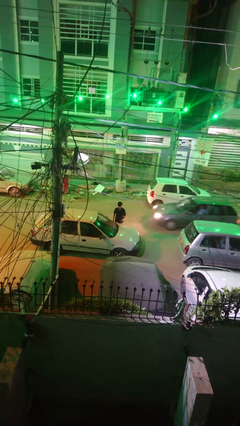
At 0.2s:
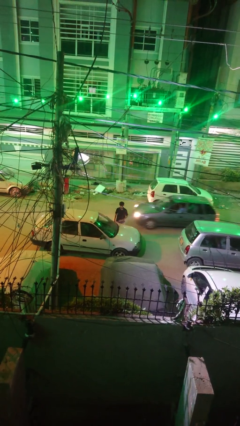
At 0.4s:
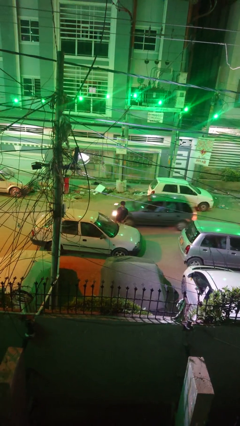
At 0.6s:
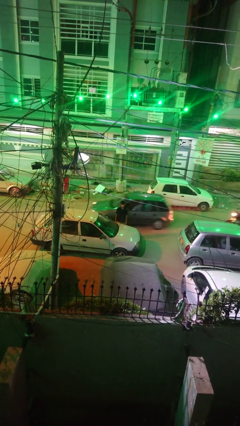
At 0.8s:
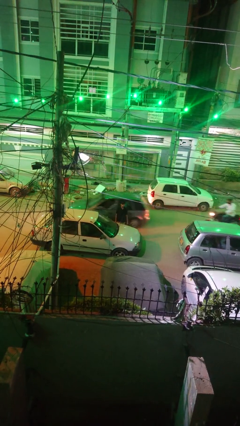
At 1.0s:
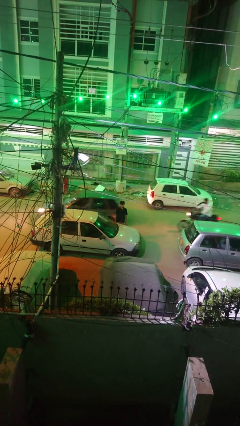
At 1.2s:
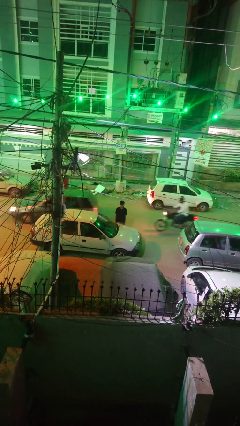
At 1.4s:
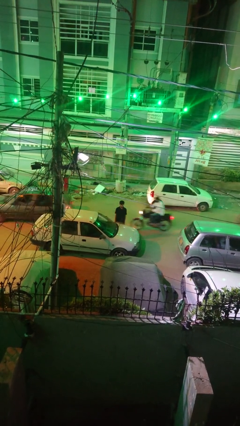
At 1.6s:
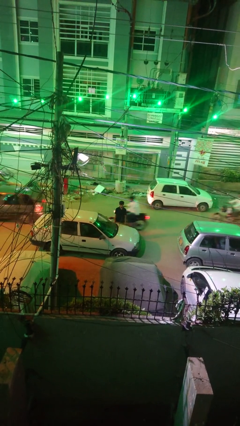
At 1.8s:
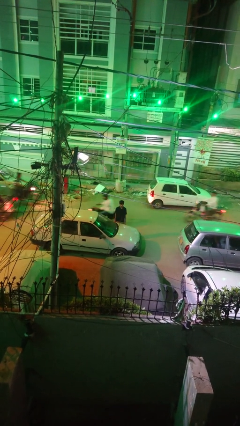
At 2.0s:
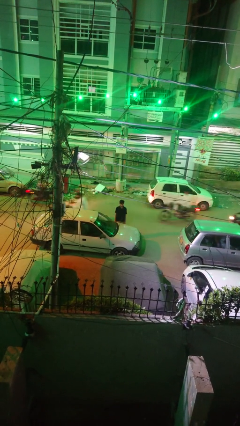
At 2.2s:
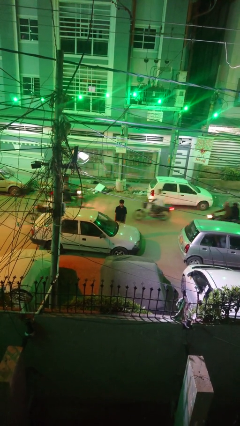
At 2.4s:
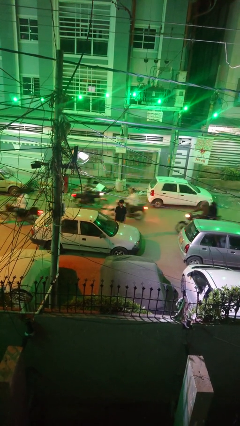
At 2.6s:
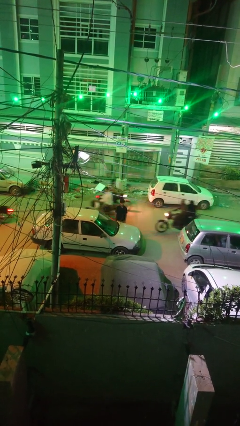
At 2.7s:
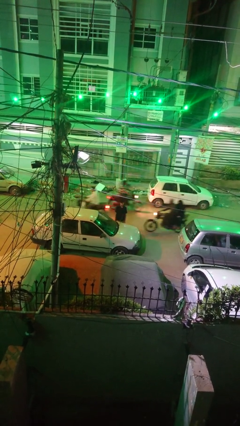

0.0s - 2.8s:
person flips up car wipers

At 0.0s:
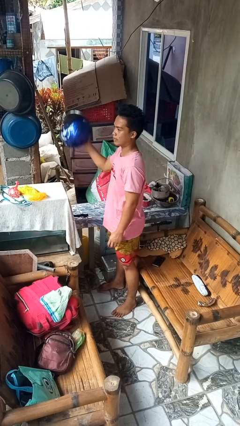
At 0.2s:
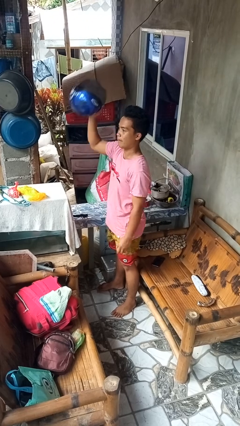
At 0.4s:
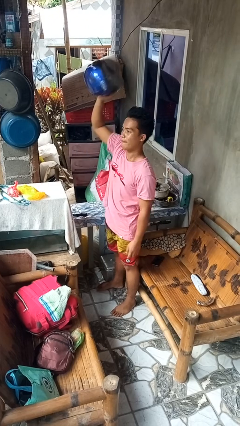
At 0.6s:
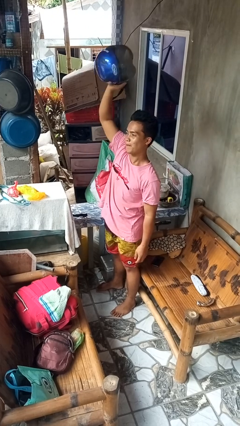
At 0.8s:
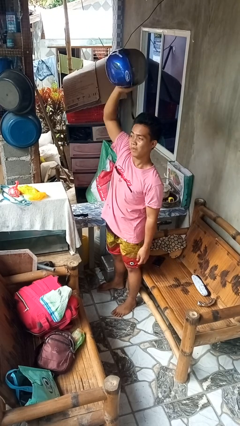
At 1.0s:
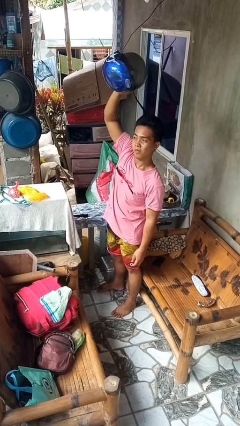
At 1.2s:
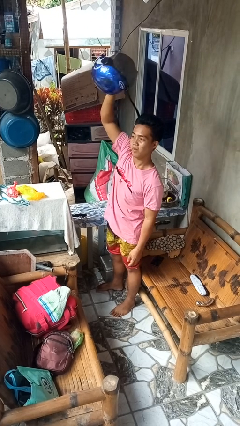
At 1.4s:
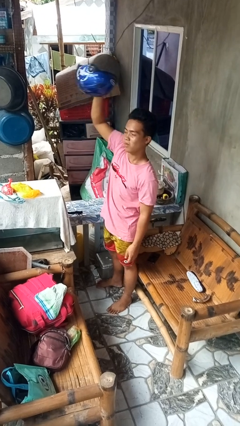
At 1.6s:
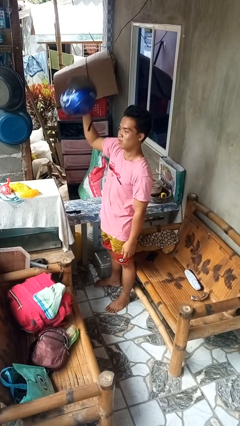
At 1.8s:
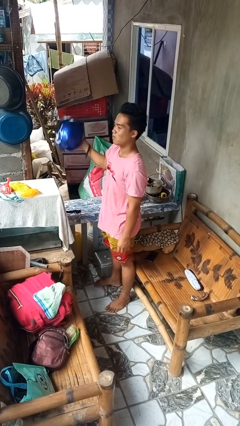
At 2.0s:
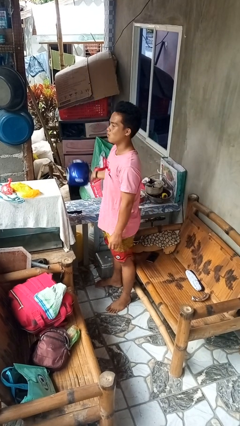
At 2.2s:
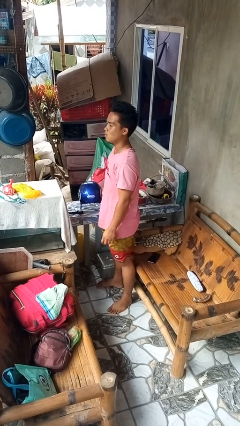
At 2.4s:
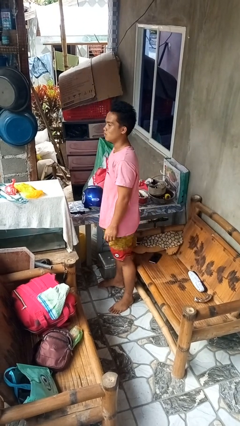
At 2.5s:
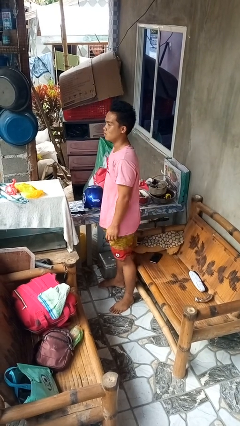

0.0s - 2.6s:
person holds object above head

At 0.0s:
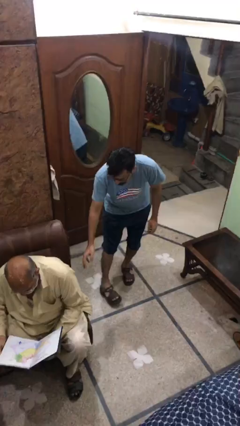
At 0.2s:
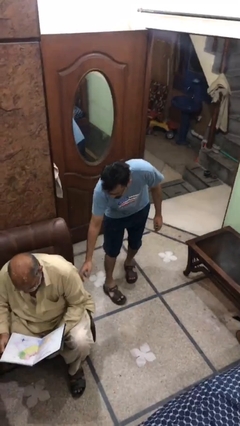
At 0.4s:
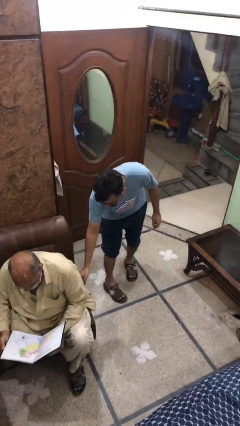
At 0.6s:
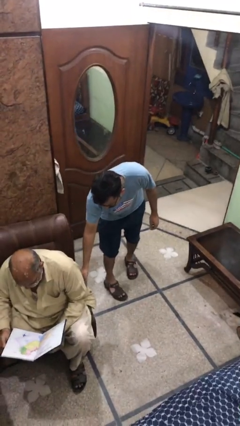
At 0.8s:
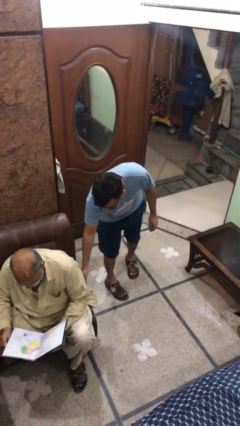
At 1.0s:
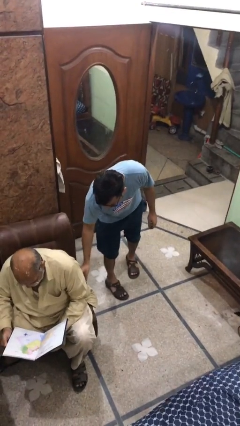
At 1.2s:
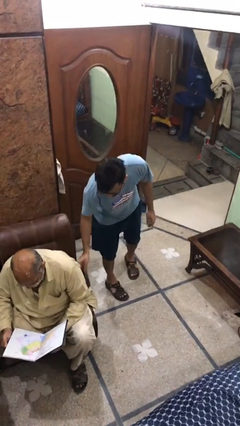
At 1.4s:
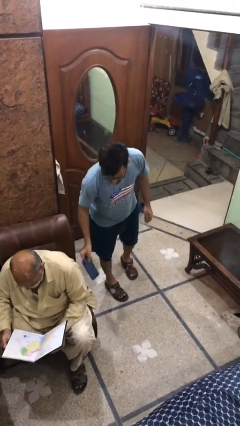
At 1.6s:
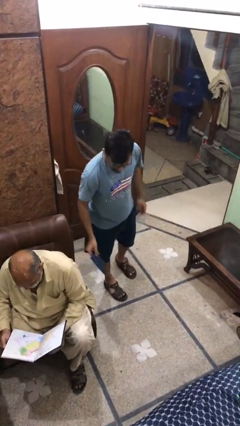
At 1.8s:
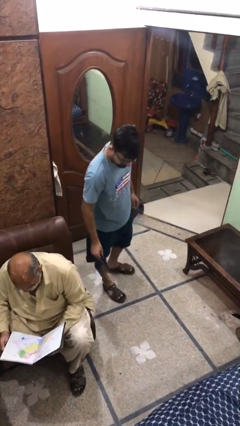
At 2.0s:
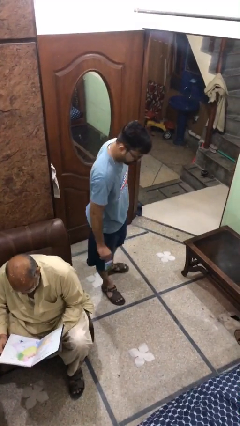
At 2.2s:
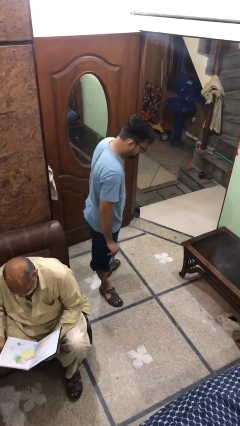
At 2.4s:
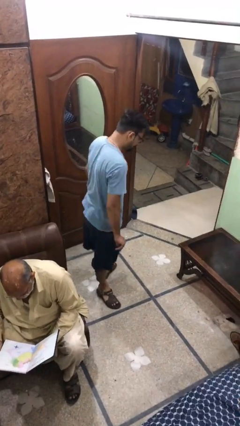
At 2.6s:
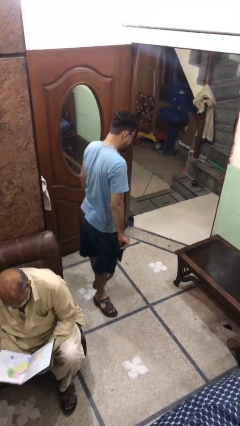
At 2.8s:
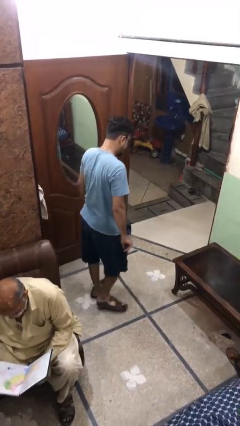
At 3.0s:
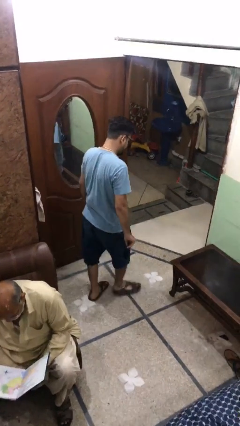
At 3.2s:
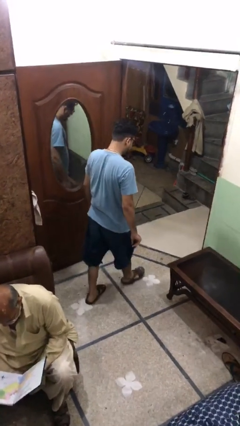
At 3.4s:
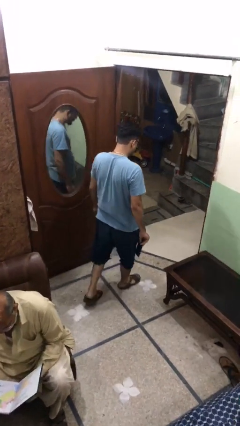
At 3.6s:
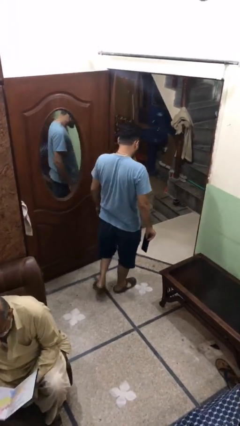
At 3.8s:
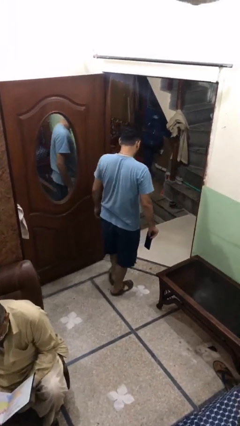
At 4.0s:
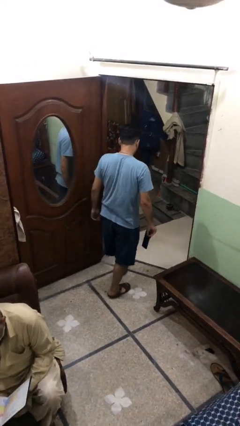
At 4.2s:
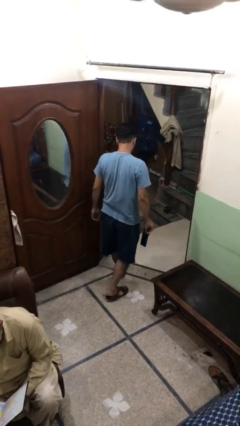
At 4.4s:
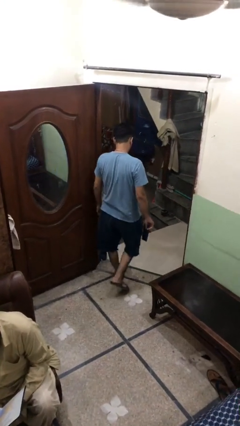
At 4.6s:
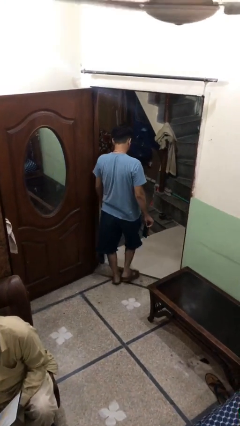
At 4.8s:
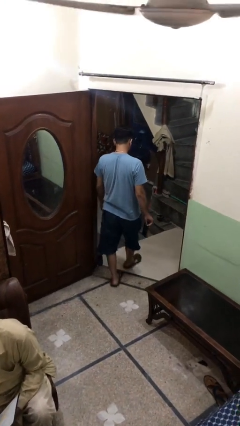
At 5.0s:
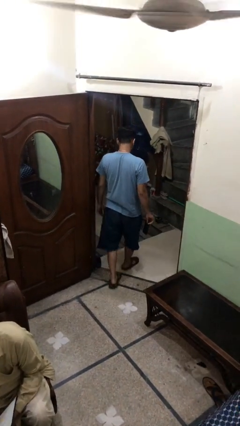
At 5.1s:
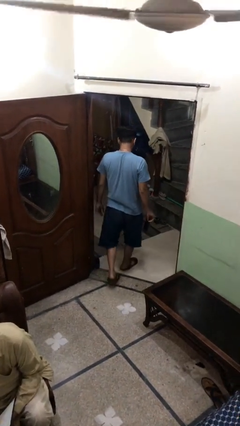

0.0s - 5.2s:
person steals object from person

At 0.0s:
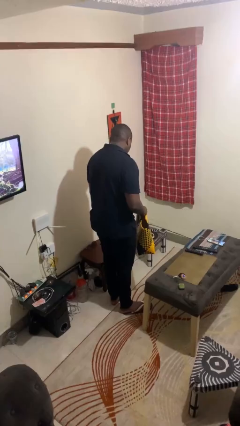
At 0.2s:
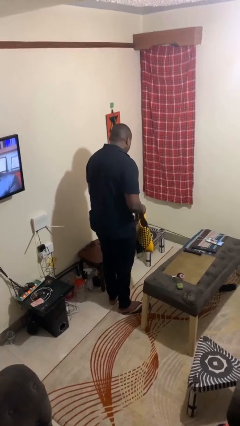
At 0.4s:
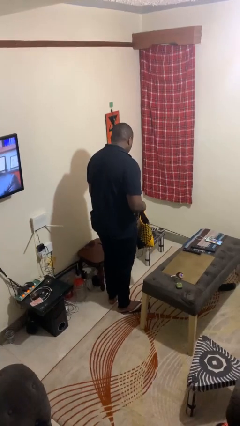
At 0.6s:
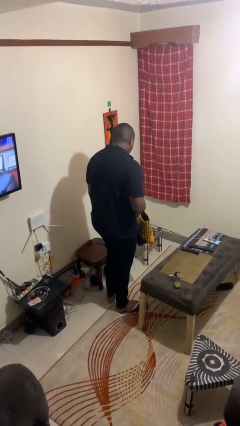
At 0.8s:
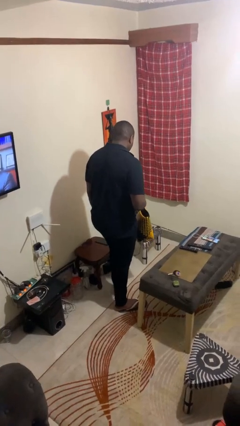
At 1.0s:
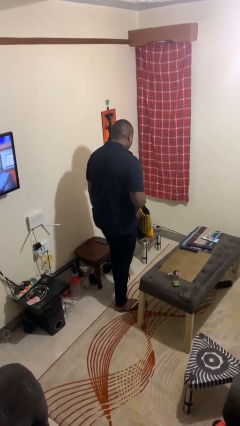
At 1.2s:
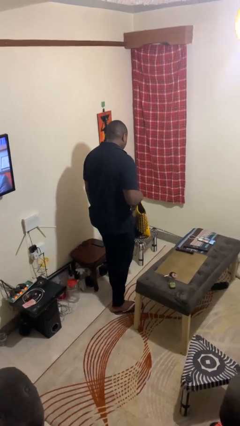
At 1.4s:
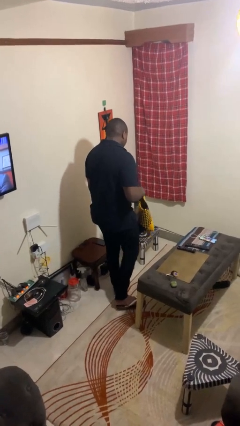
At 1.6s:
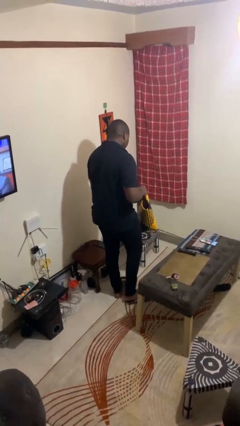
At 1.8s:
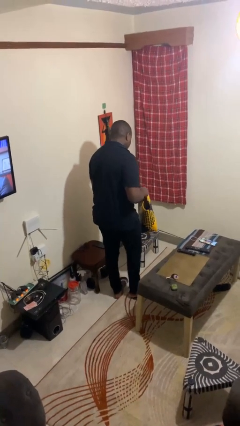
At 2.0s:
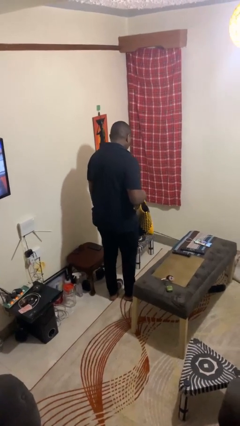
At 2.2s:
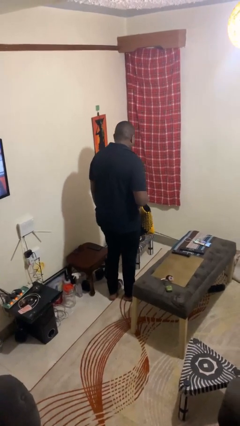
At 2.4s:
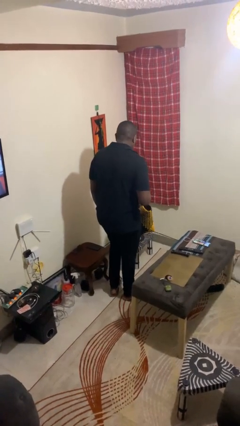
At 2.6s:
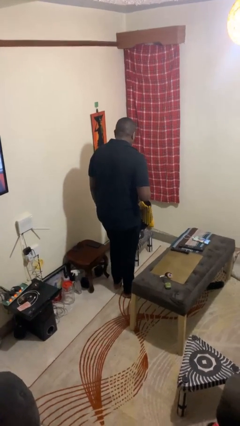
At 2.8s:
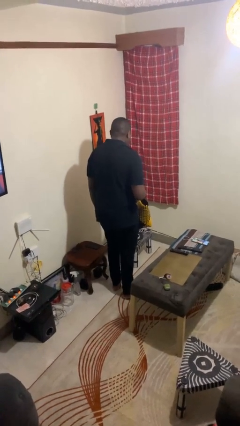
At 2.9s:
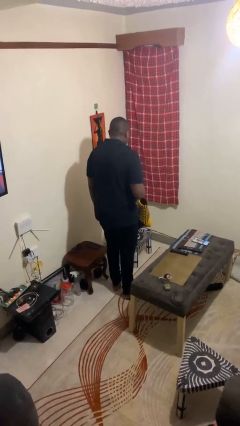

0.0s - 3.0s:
person carries groceries

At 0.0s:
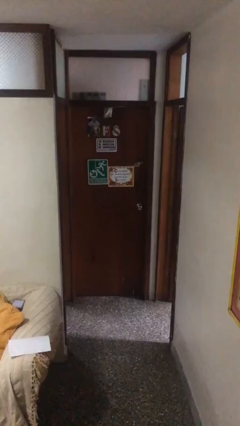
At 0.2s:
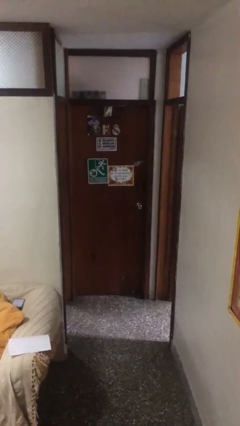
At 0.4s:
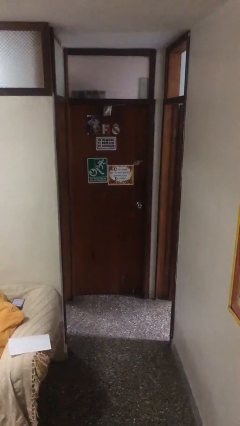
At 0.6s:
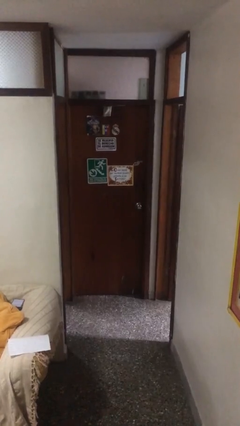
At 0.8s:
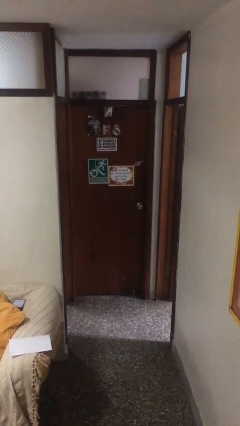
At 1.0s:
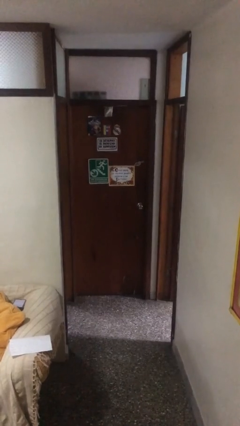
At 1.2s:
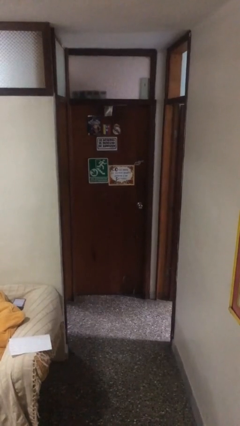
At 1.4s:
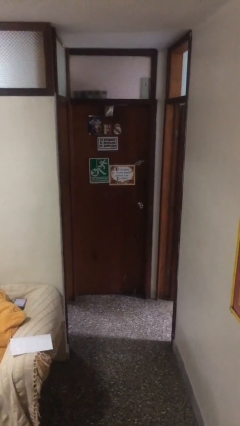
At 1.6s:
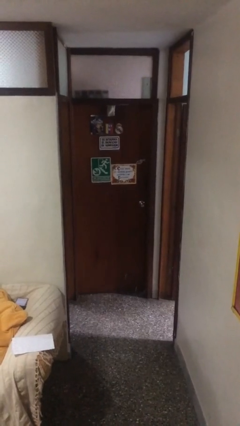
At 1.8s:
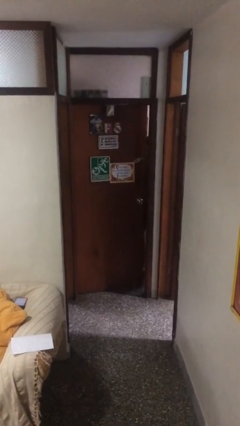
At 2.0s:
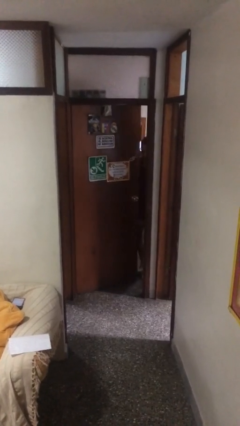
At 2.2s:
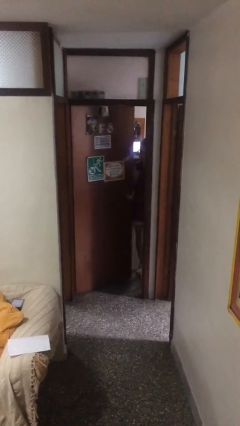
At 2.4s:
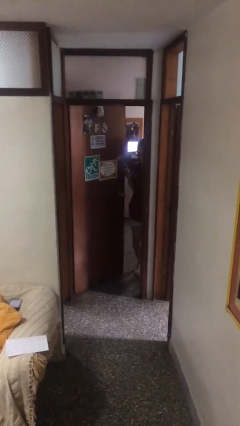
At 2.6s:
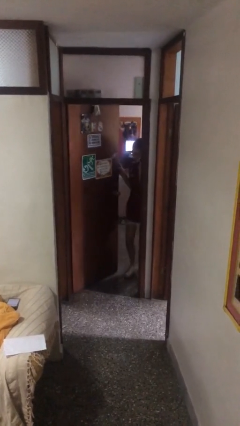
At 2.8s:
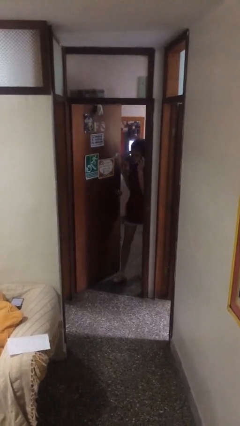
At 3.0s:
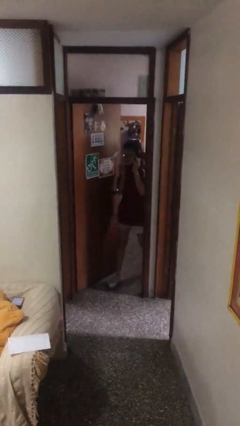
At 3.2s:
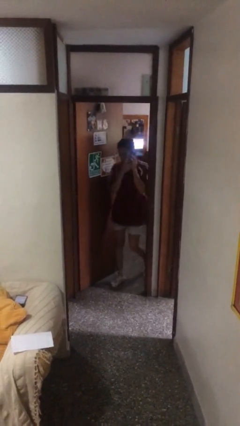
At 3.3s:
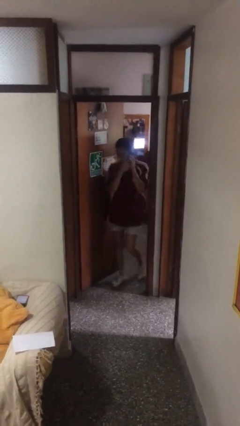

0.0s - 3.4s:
person opens facility door

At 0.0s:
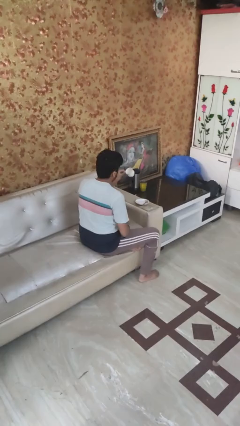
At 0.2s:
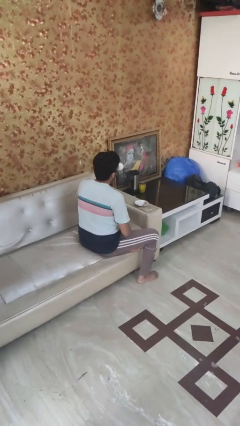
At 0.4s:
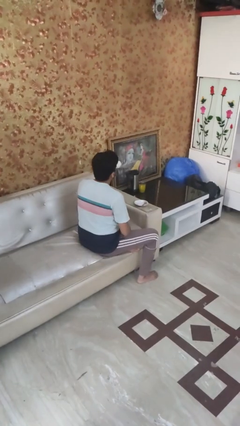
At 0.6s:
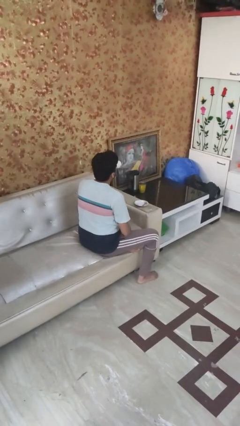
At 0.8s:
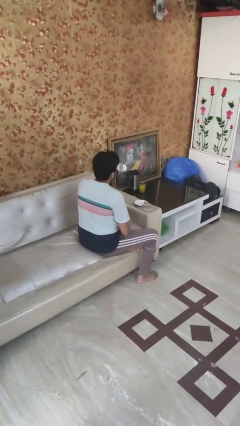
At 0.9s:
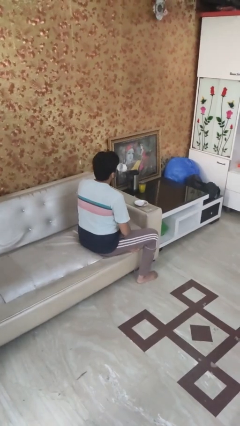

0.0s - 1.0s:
person drinks from mug
